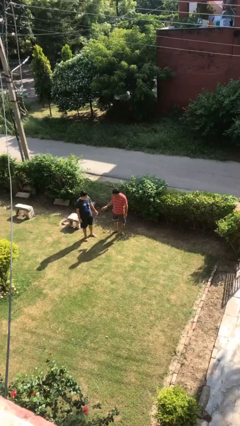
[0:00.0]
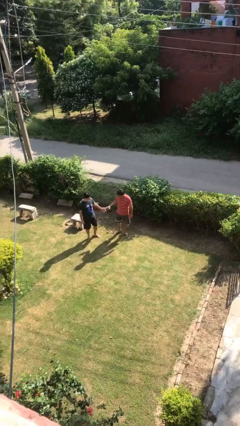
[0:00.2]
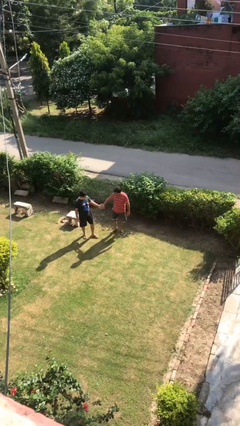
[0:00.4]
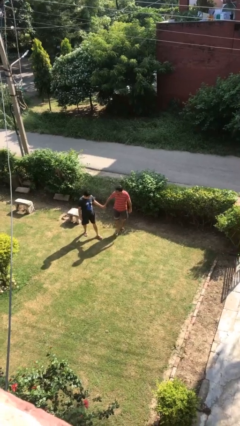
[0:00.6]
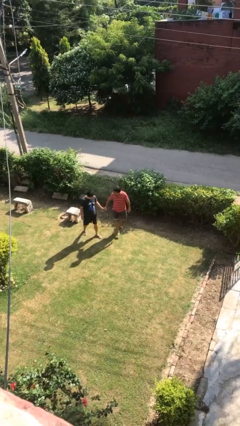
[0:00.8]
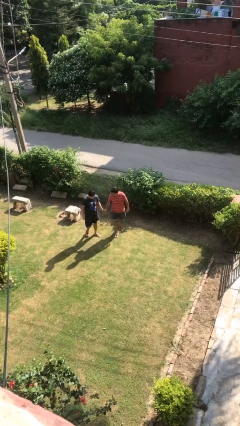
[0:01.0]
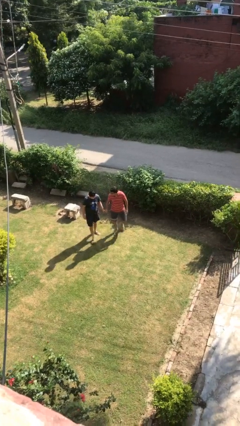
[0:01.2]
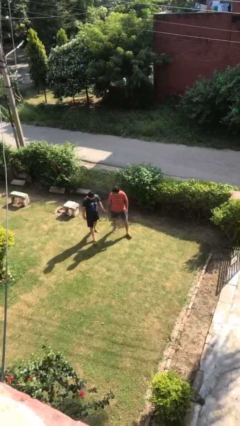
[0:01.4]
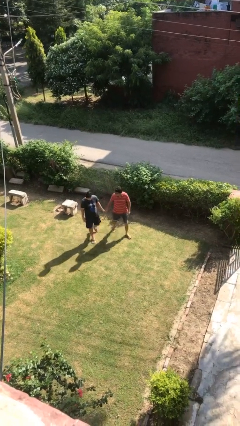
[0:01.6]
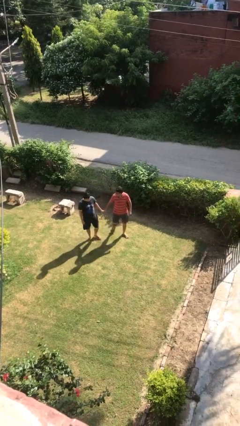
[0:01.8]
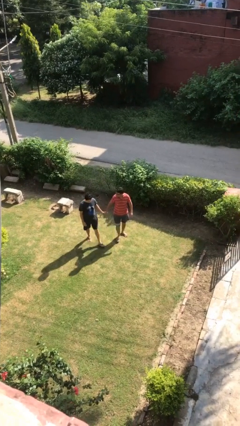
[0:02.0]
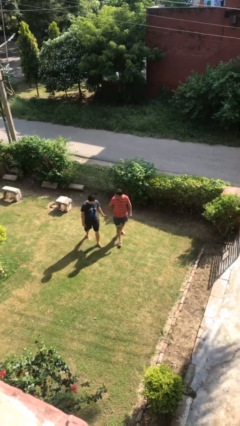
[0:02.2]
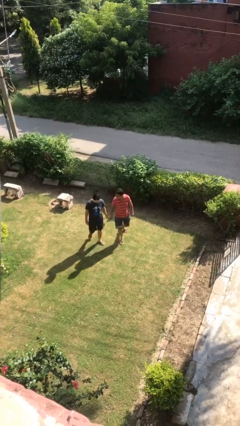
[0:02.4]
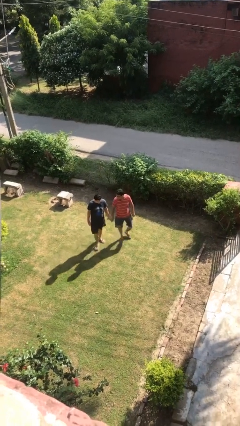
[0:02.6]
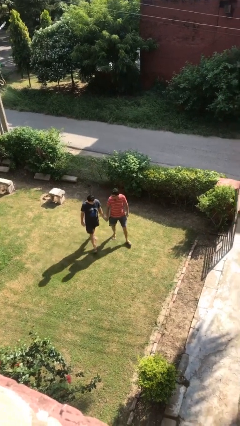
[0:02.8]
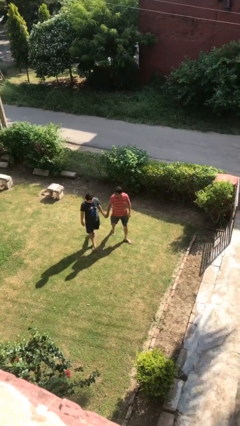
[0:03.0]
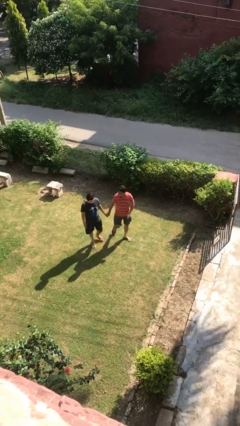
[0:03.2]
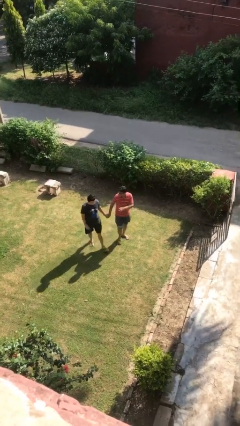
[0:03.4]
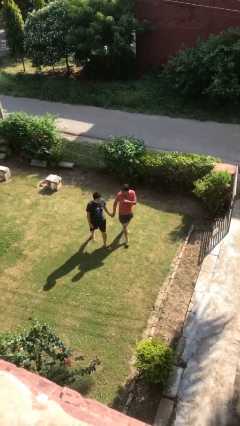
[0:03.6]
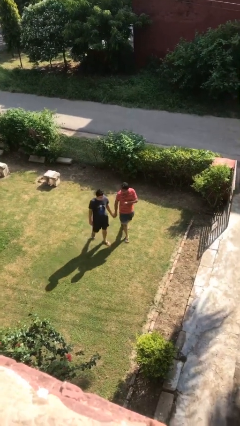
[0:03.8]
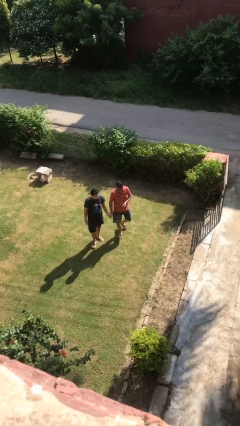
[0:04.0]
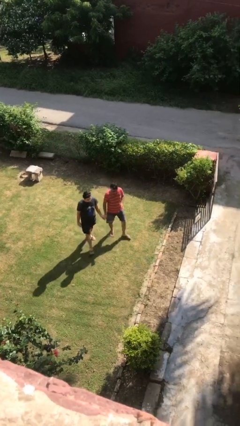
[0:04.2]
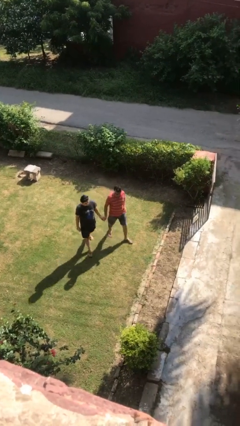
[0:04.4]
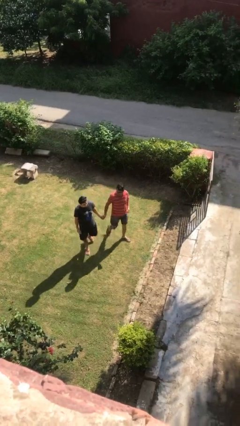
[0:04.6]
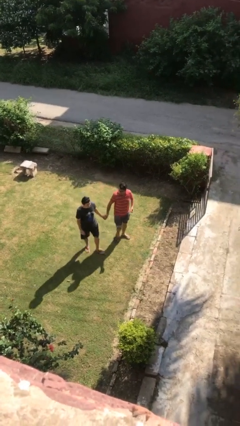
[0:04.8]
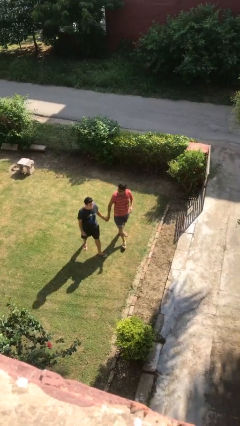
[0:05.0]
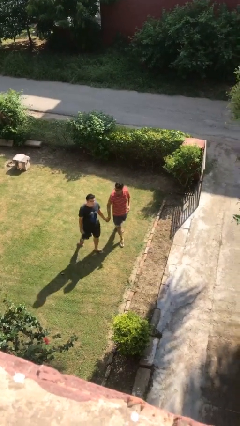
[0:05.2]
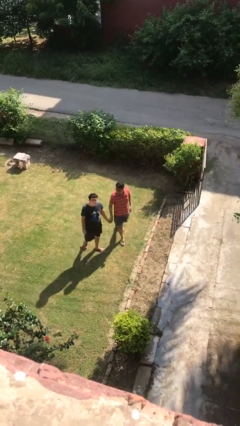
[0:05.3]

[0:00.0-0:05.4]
person holds hand

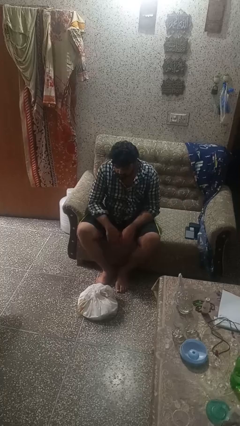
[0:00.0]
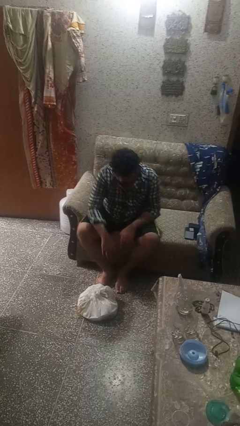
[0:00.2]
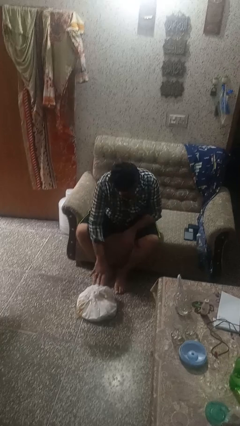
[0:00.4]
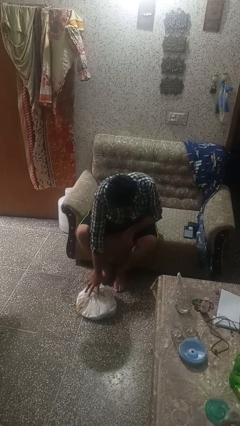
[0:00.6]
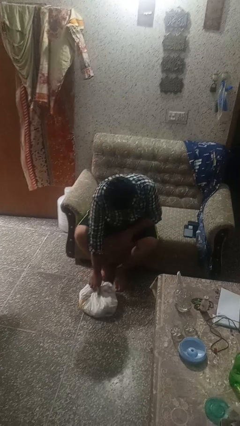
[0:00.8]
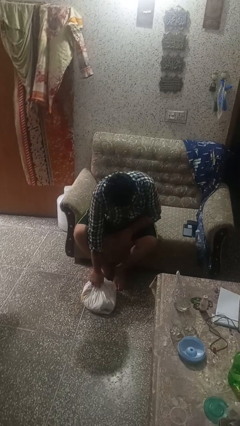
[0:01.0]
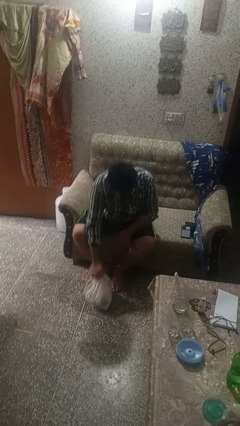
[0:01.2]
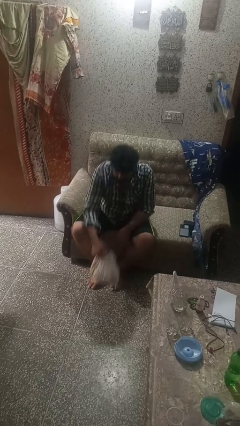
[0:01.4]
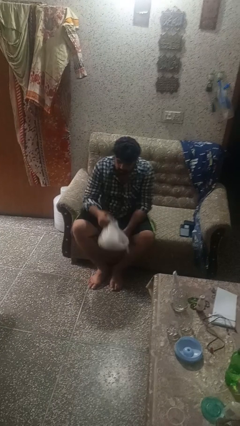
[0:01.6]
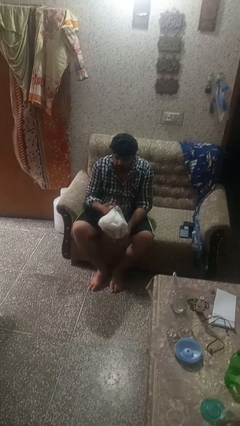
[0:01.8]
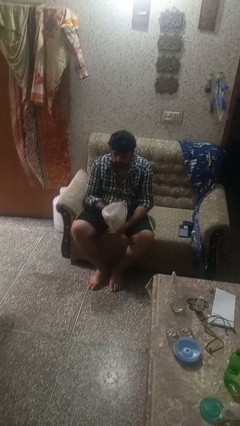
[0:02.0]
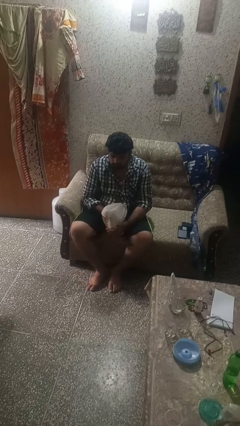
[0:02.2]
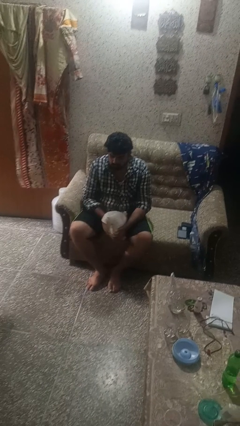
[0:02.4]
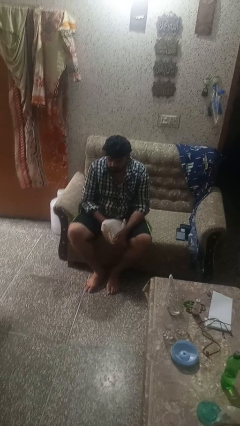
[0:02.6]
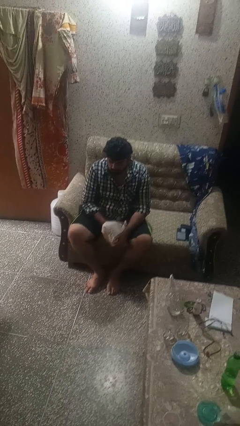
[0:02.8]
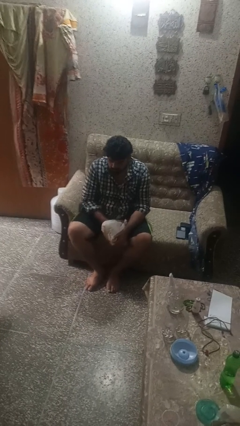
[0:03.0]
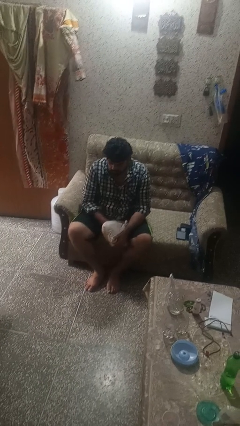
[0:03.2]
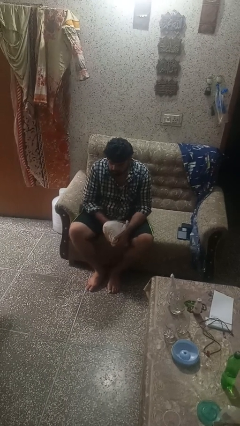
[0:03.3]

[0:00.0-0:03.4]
person picks up object from floor

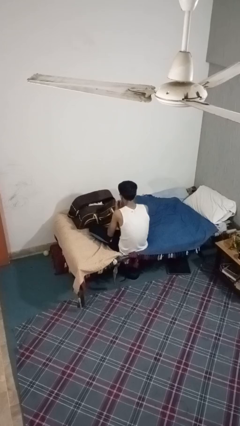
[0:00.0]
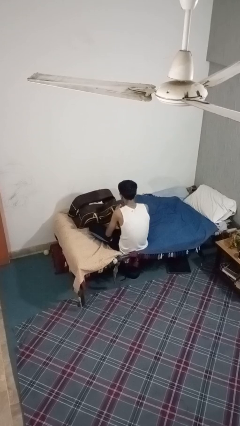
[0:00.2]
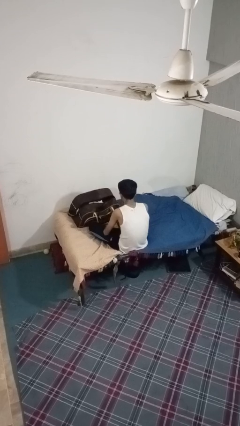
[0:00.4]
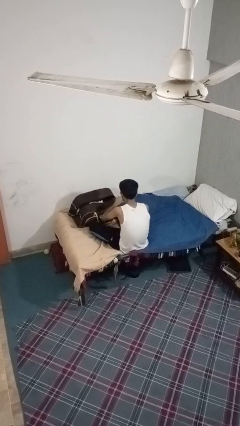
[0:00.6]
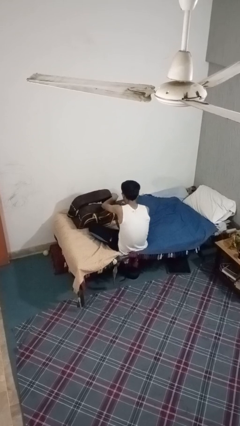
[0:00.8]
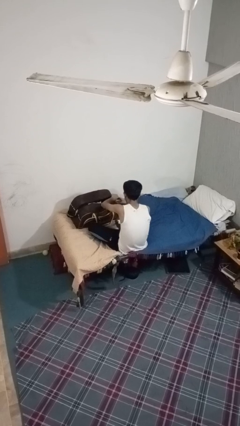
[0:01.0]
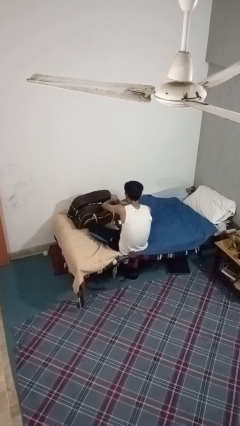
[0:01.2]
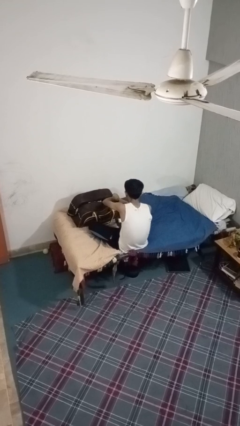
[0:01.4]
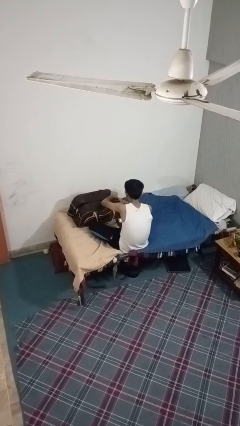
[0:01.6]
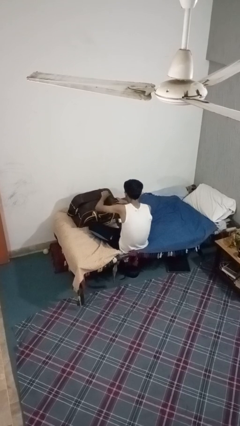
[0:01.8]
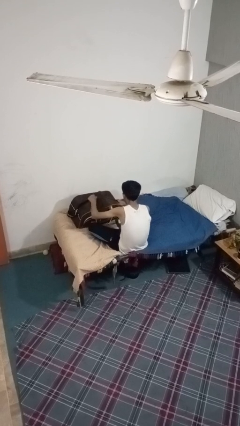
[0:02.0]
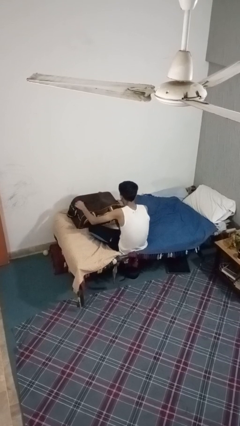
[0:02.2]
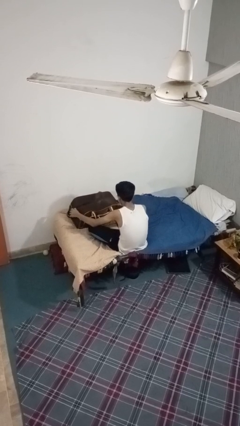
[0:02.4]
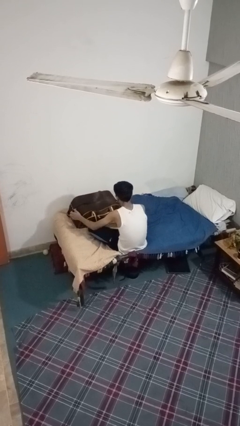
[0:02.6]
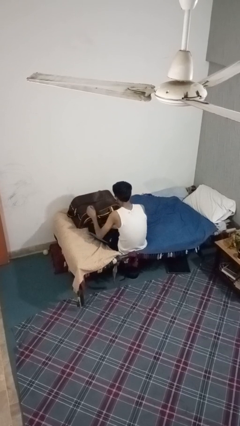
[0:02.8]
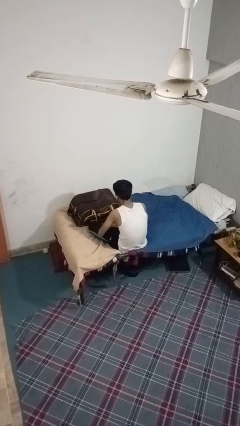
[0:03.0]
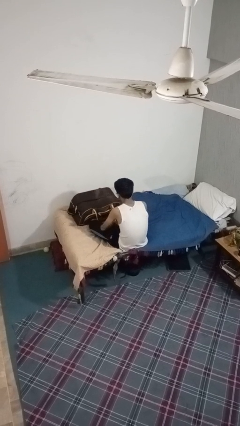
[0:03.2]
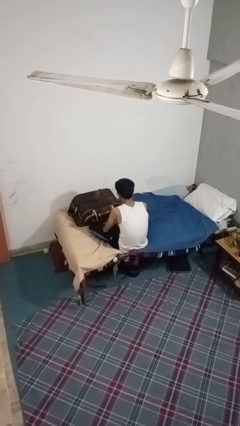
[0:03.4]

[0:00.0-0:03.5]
person closes suitcase

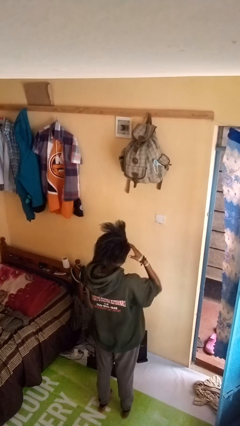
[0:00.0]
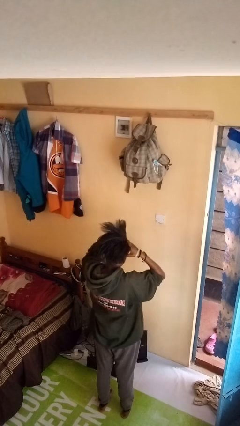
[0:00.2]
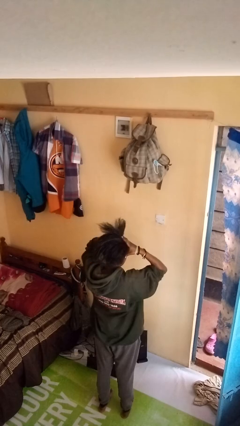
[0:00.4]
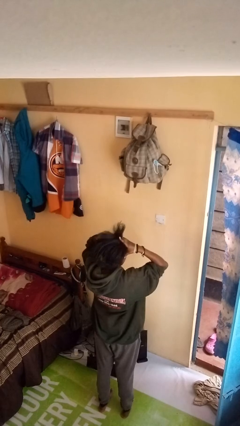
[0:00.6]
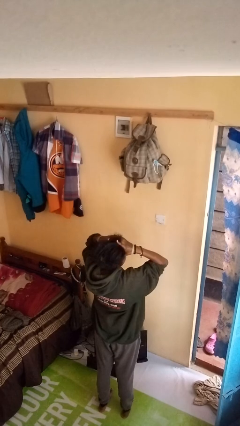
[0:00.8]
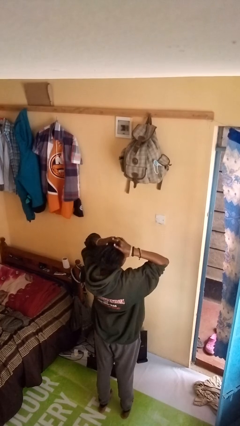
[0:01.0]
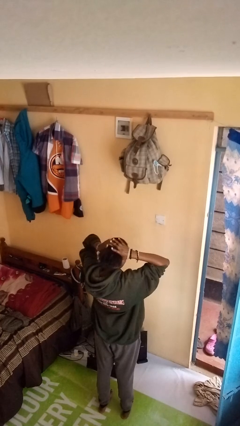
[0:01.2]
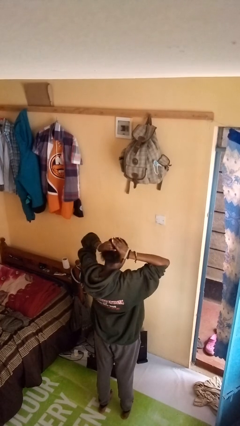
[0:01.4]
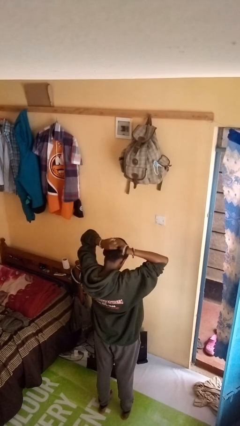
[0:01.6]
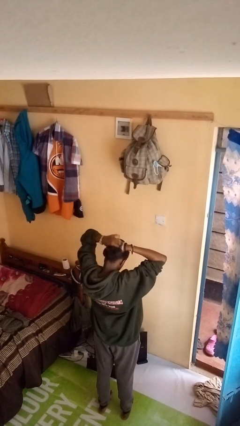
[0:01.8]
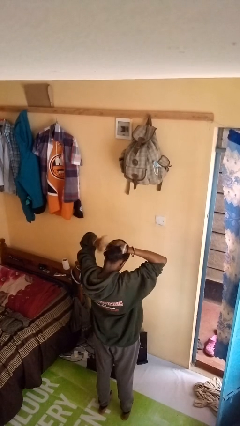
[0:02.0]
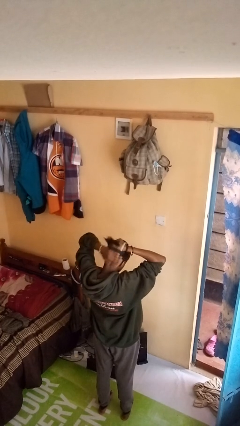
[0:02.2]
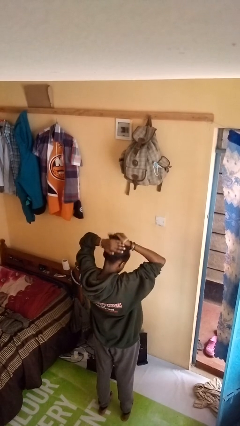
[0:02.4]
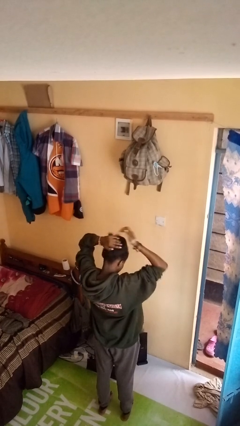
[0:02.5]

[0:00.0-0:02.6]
person strokes hair

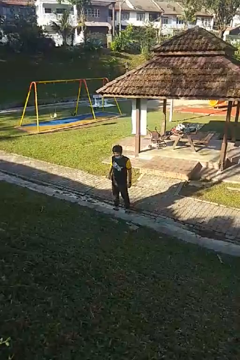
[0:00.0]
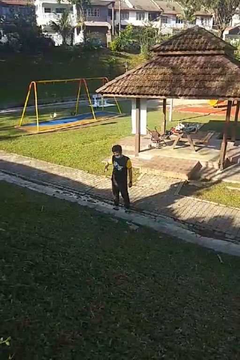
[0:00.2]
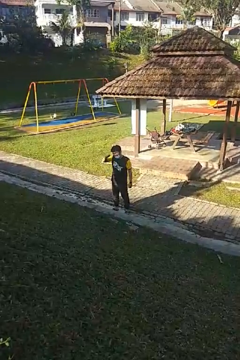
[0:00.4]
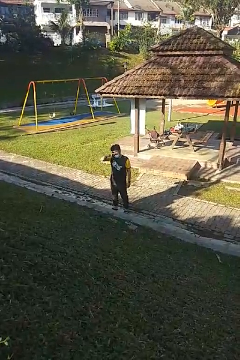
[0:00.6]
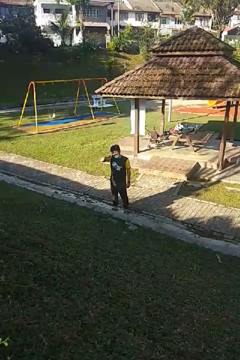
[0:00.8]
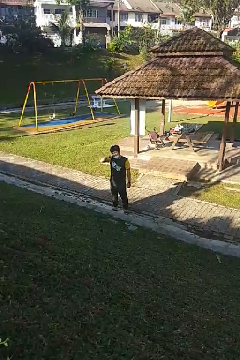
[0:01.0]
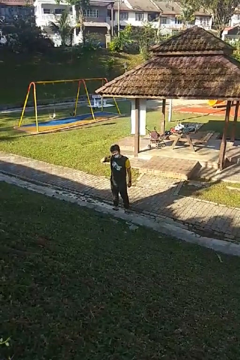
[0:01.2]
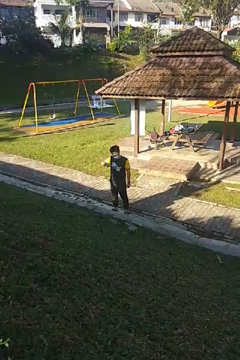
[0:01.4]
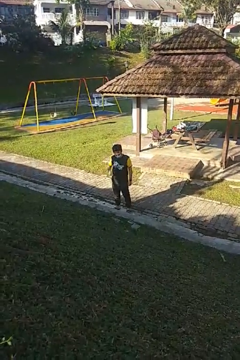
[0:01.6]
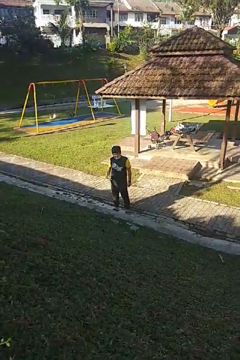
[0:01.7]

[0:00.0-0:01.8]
person brushes teeth

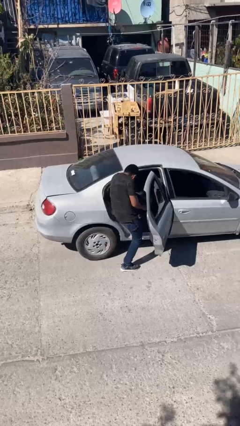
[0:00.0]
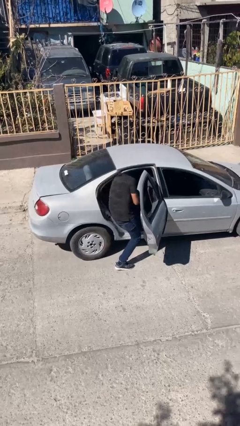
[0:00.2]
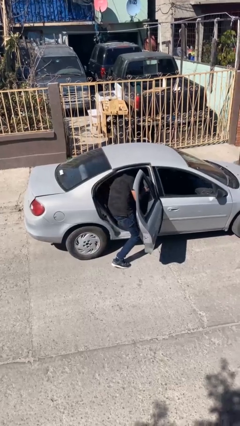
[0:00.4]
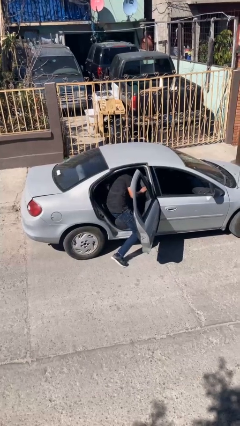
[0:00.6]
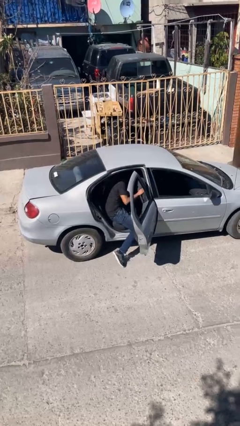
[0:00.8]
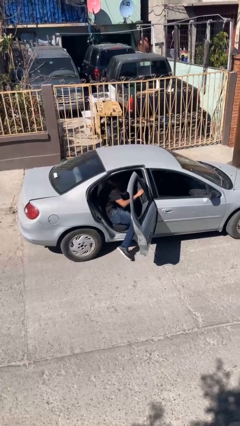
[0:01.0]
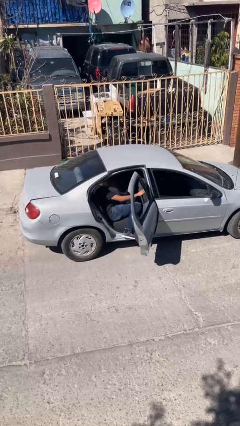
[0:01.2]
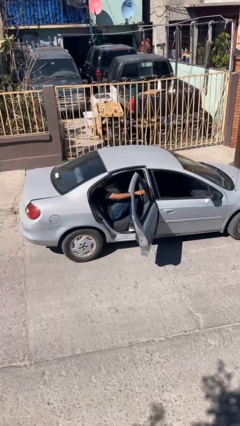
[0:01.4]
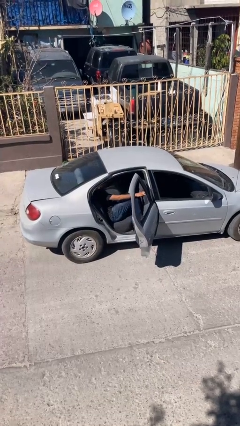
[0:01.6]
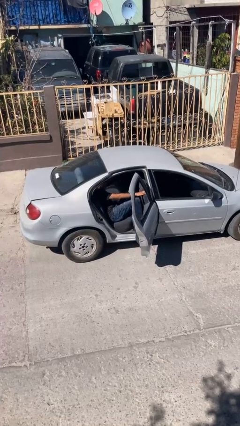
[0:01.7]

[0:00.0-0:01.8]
person enters car
